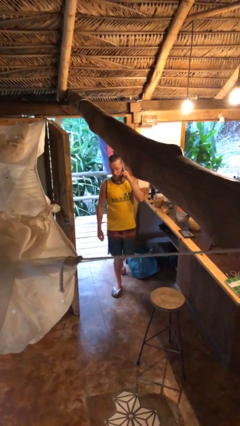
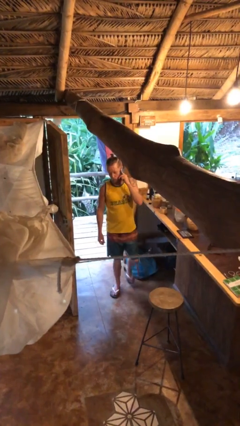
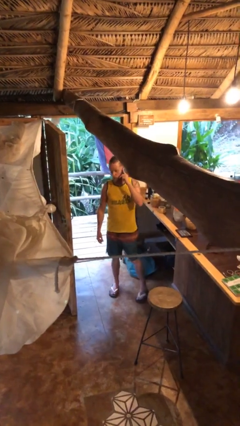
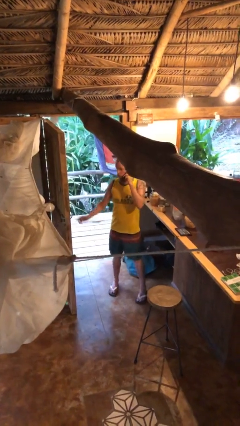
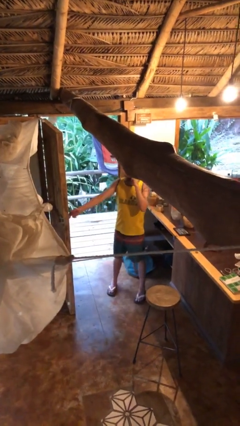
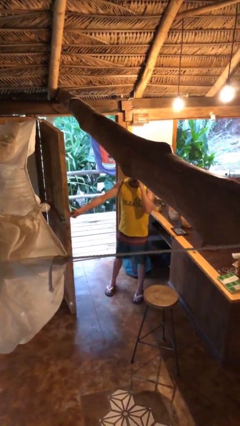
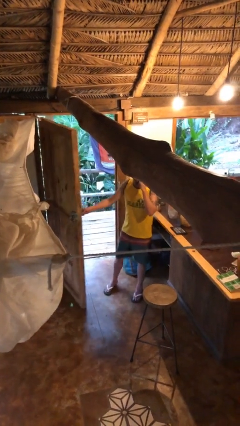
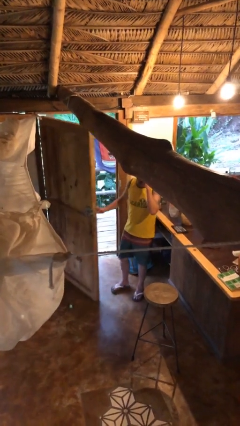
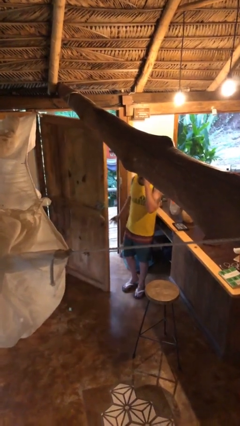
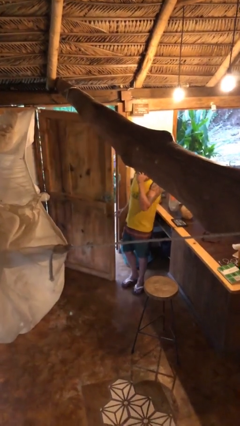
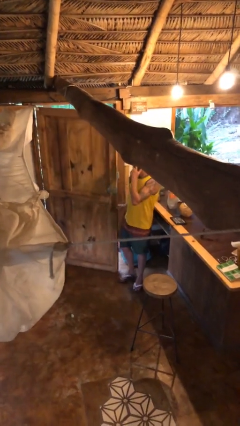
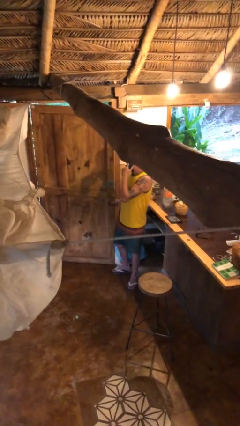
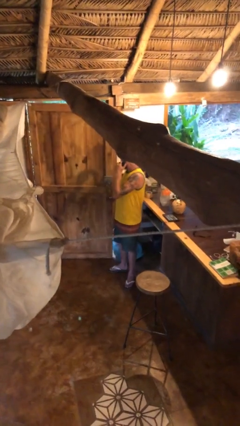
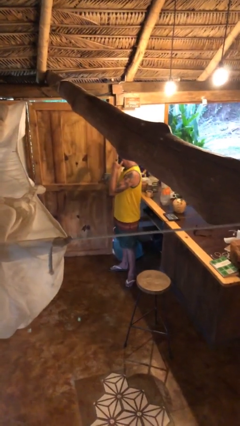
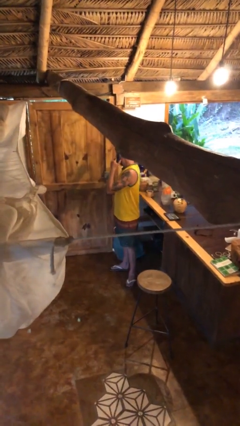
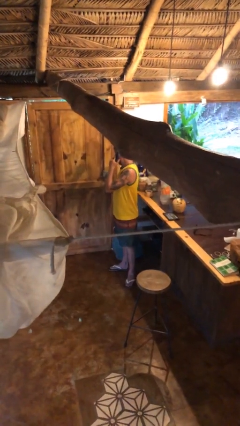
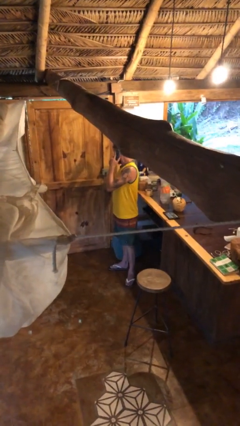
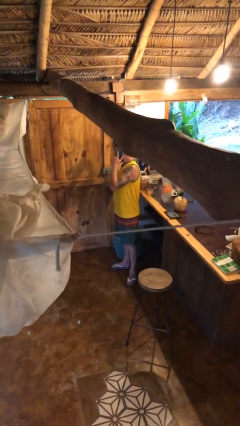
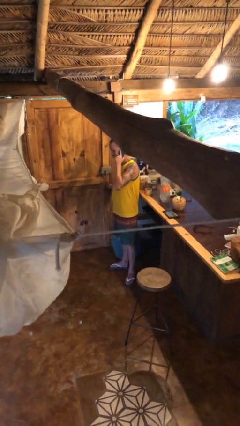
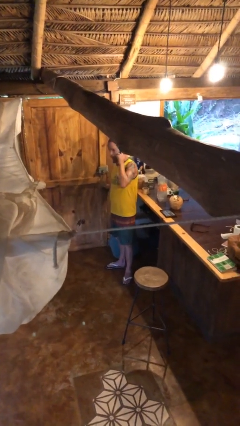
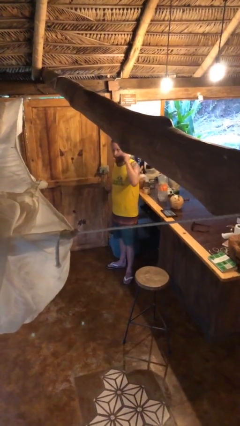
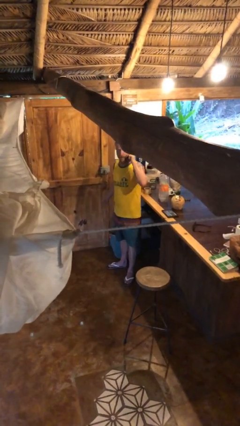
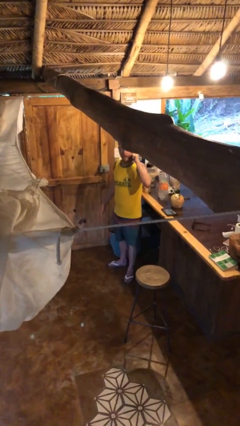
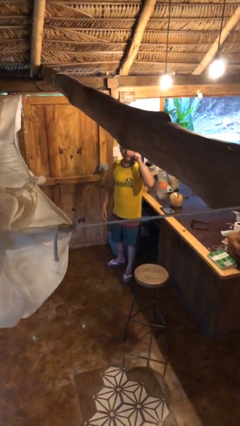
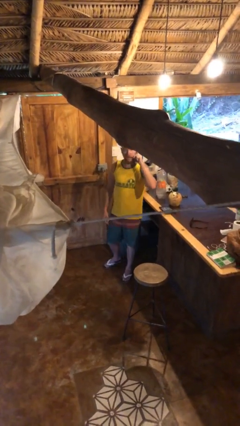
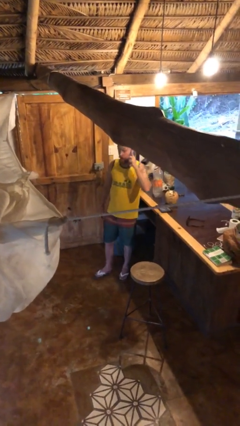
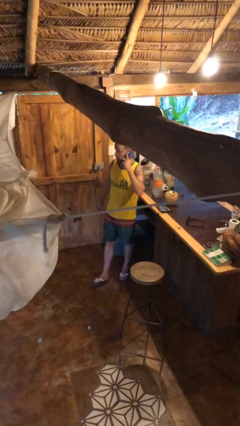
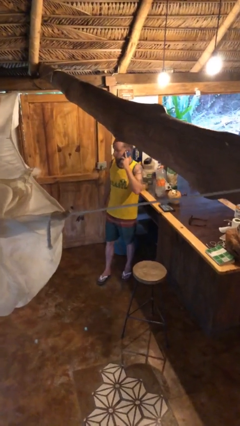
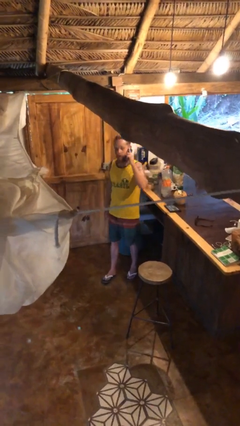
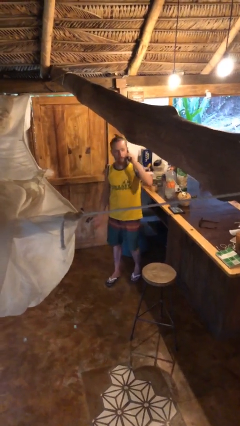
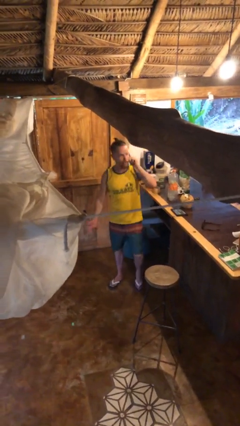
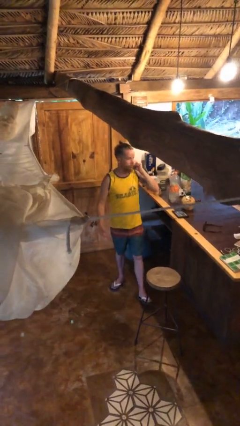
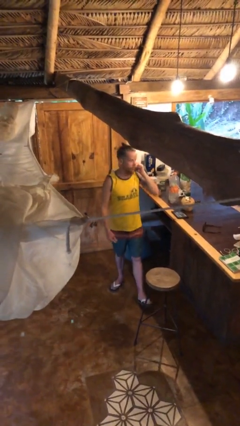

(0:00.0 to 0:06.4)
person closes facility door

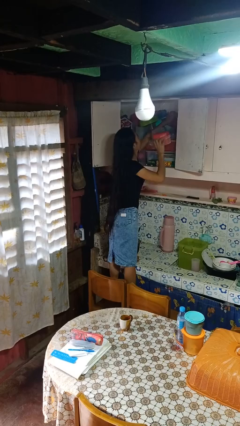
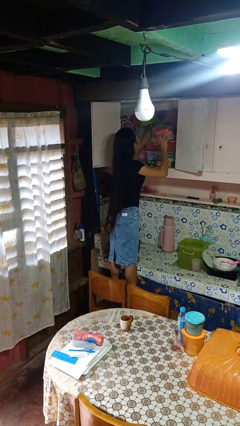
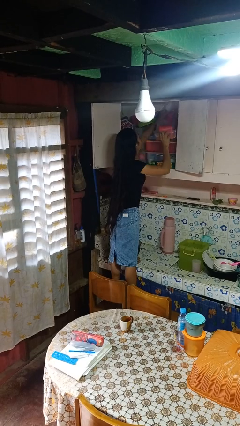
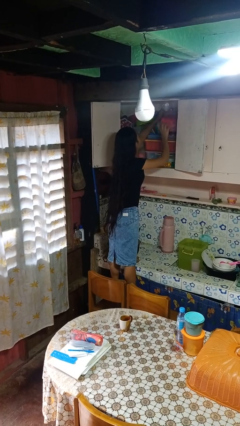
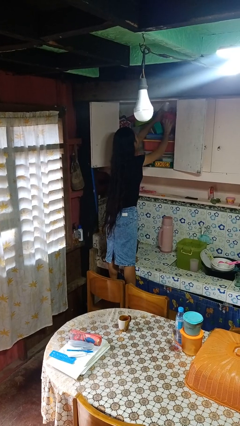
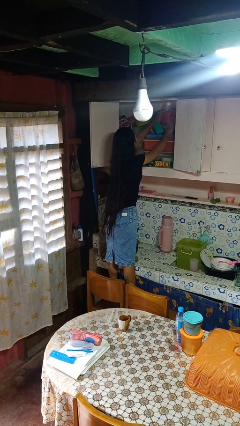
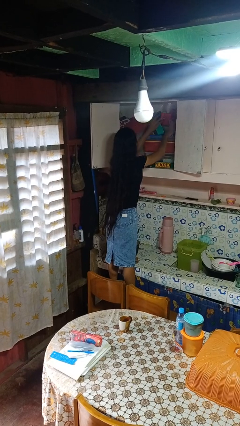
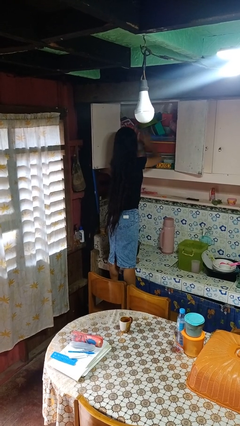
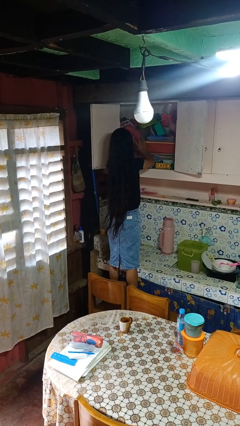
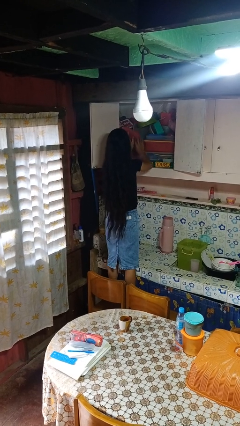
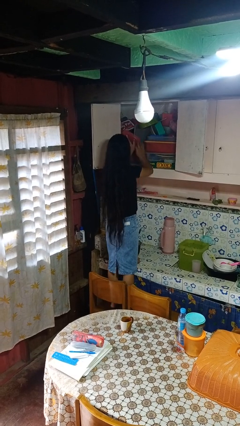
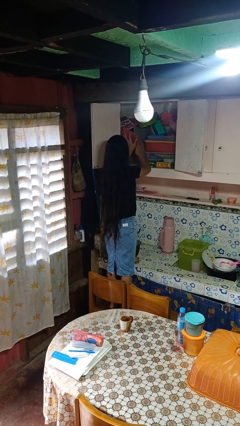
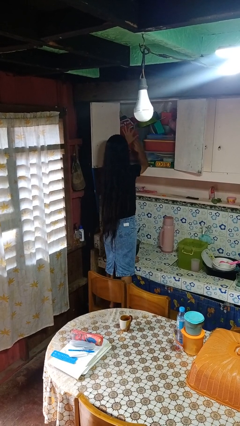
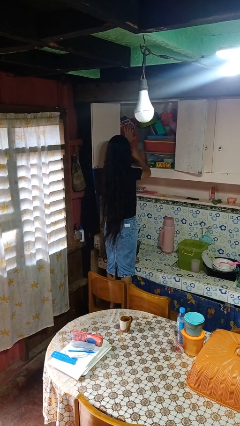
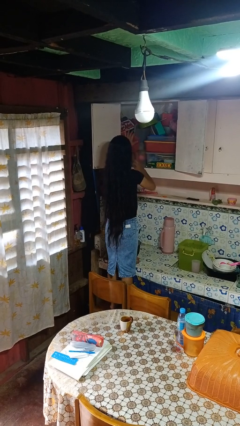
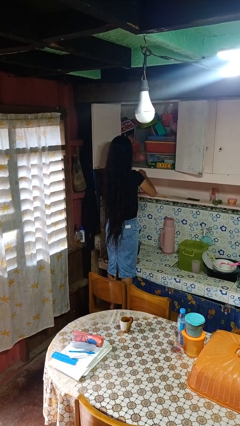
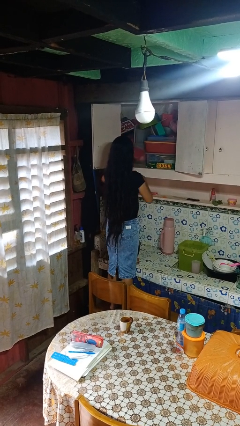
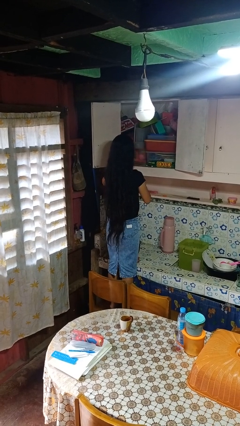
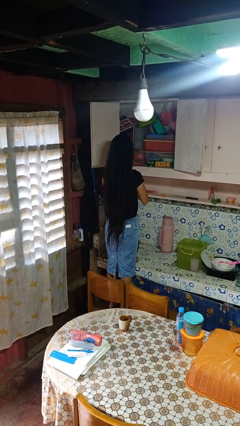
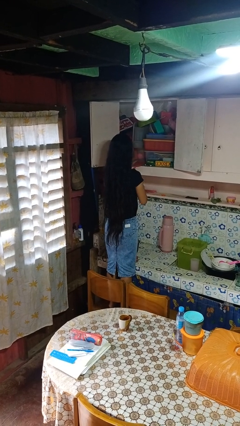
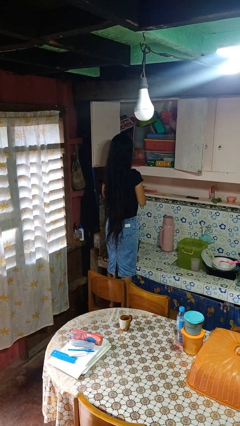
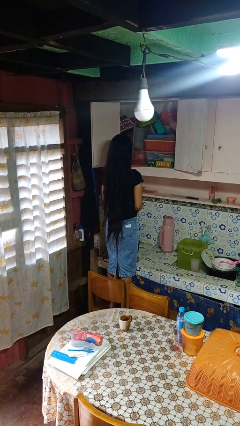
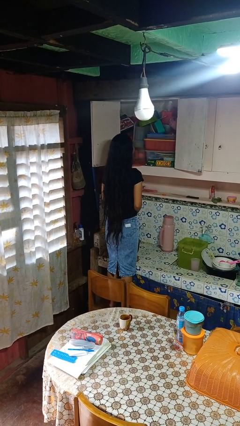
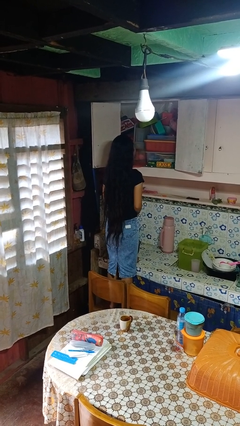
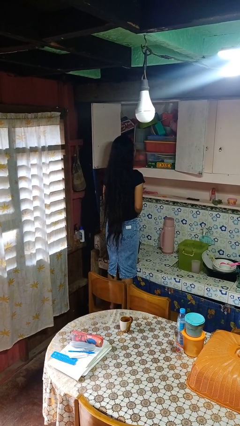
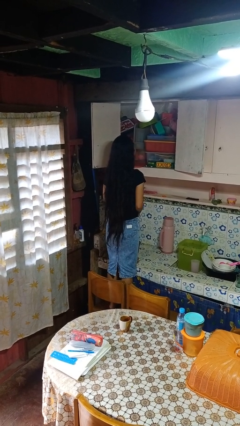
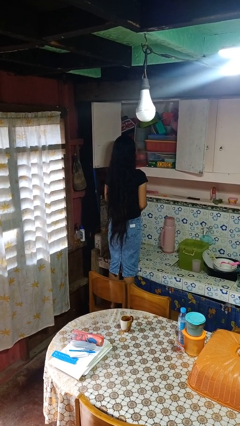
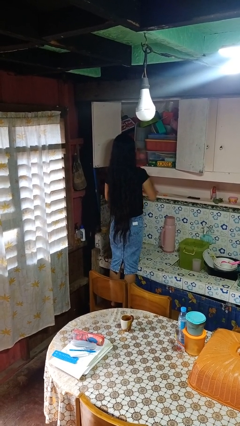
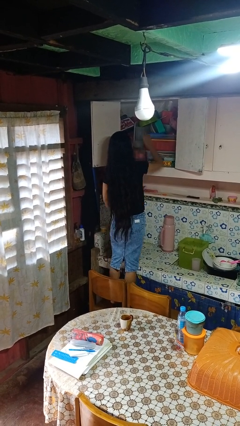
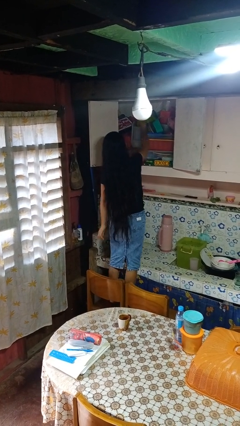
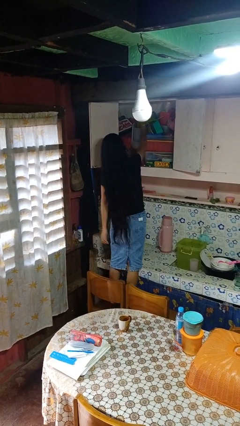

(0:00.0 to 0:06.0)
person puts object in cabinet

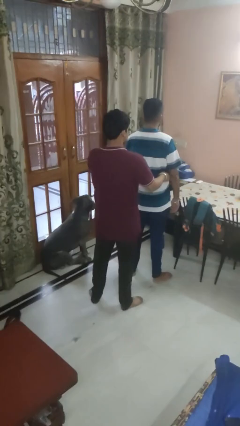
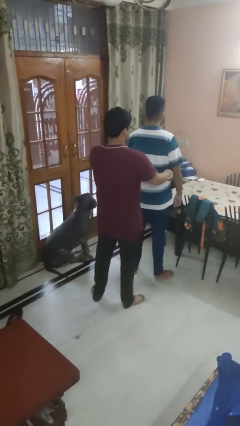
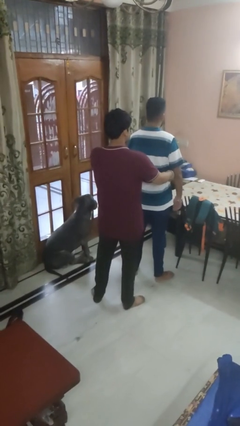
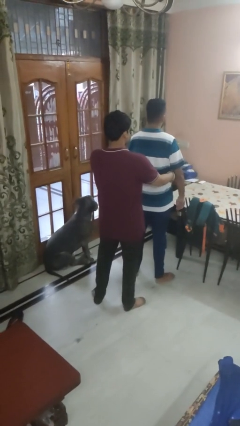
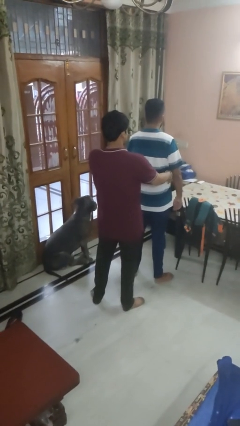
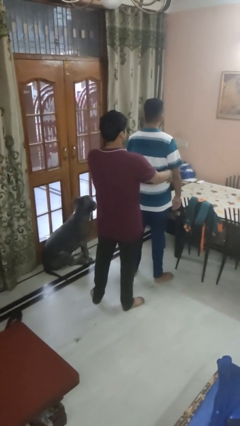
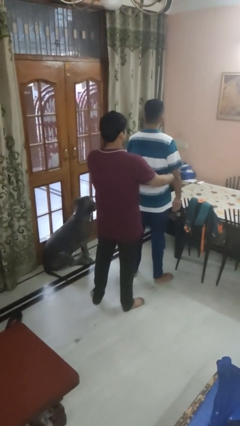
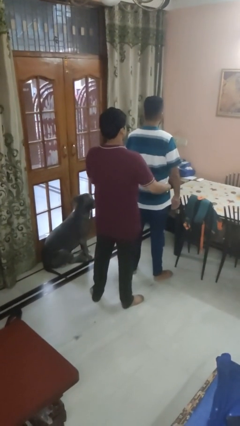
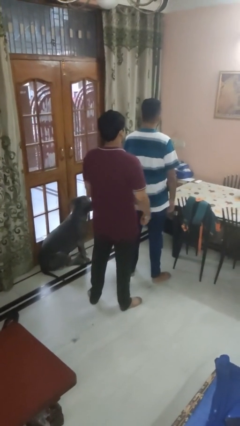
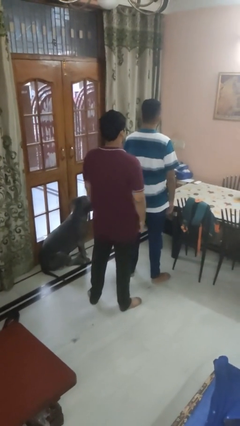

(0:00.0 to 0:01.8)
person tickles person

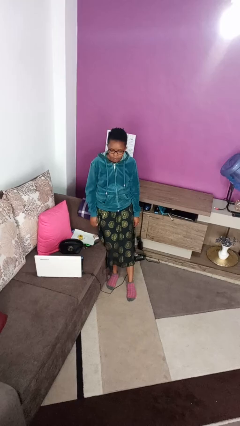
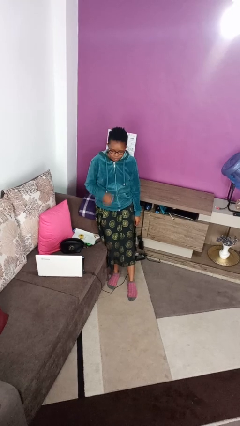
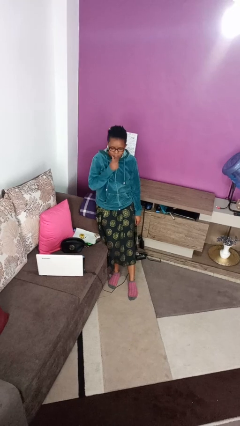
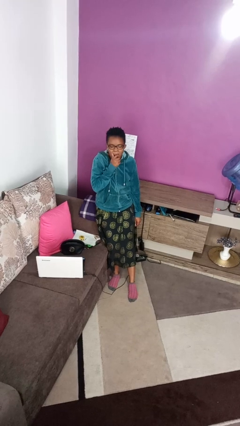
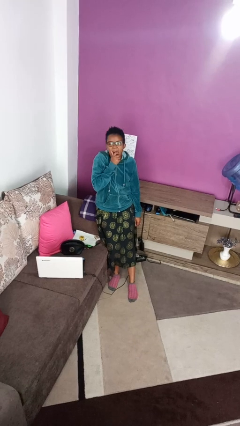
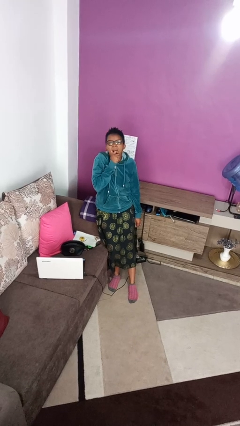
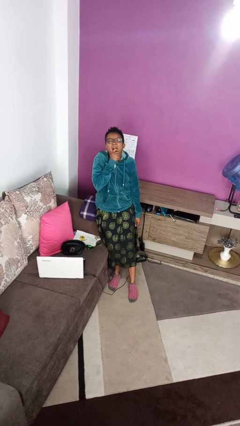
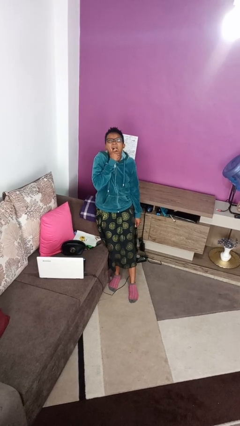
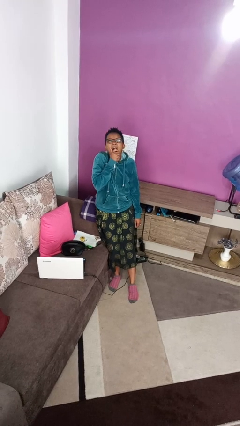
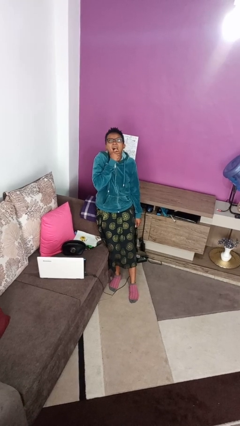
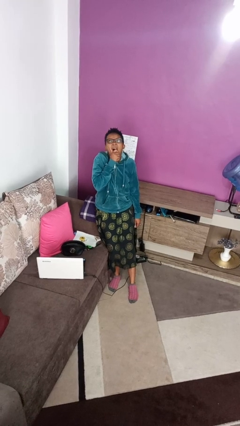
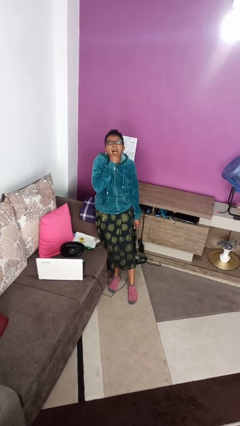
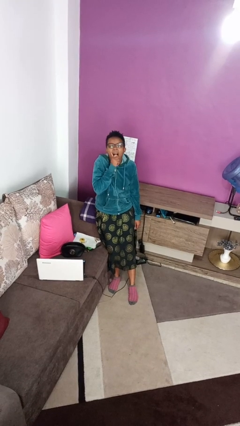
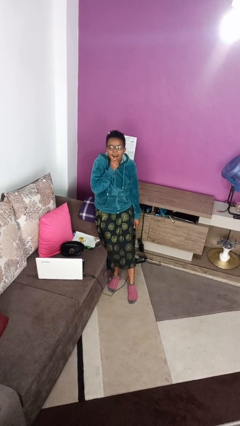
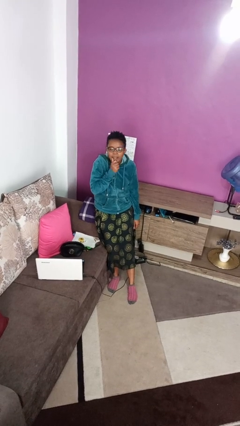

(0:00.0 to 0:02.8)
person yawns

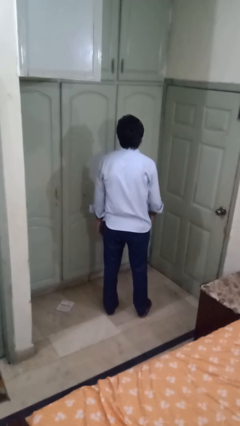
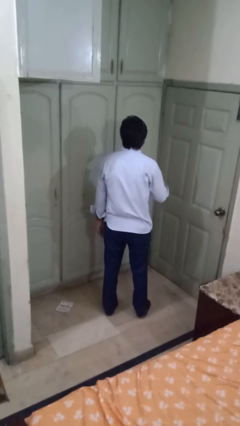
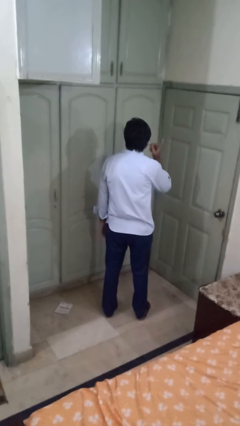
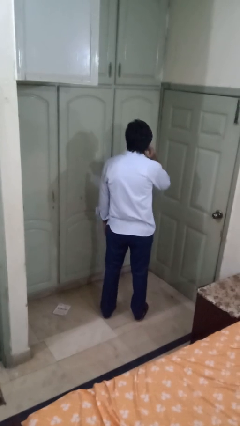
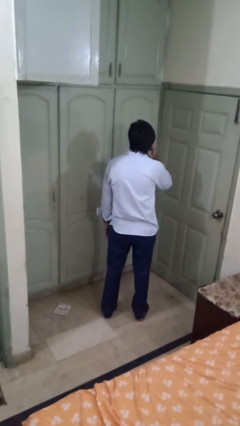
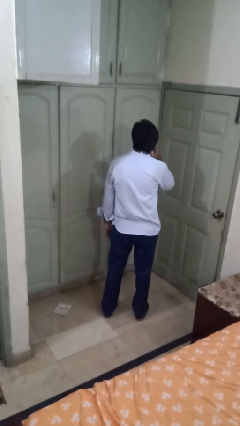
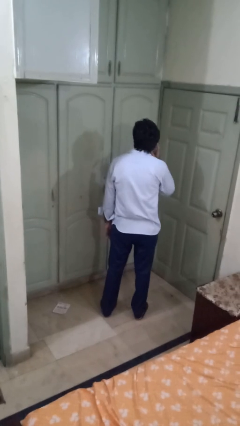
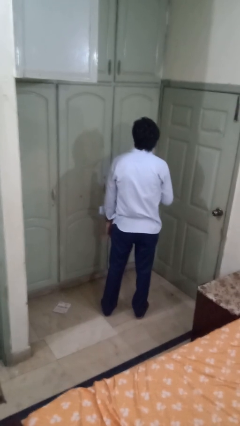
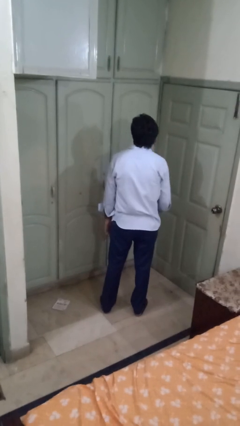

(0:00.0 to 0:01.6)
person gestures listen closely
